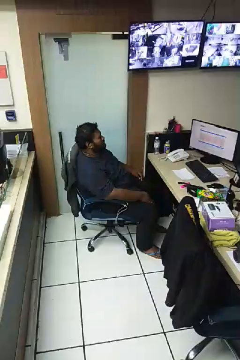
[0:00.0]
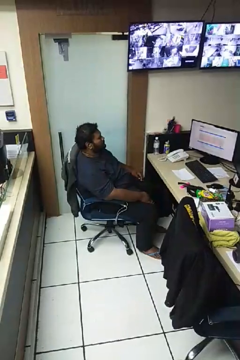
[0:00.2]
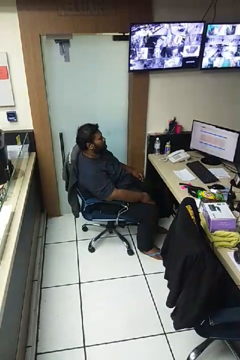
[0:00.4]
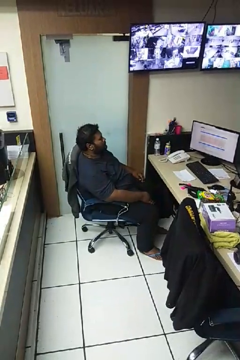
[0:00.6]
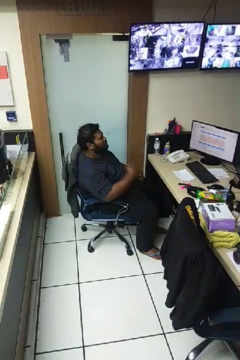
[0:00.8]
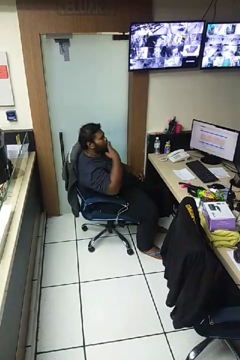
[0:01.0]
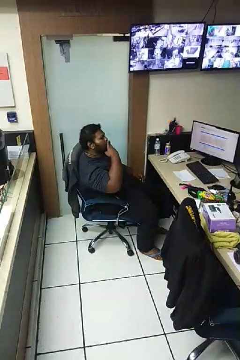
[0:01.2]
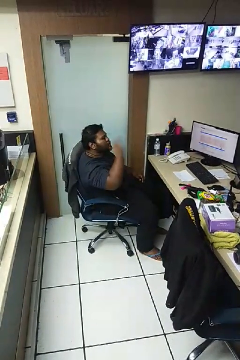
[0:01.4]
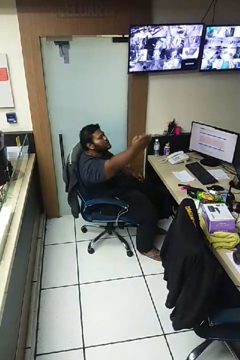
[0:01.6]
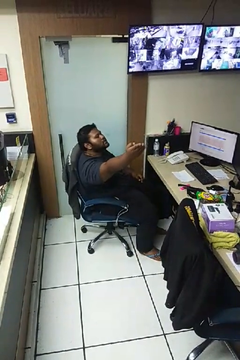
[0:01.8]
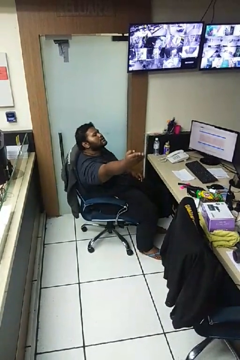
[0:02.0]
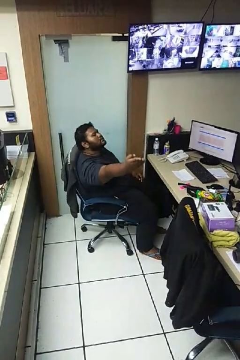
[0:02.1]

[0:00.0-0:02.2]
person gestures blow kiss

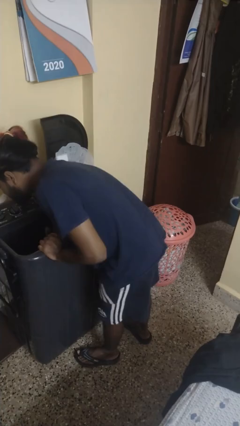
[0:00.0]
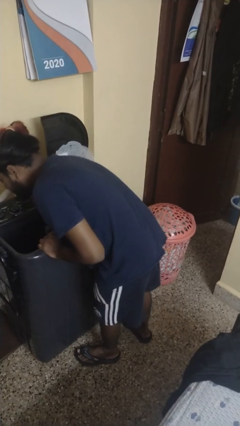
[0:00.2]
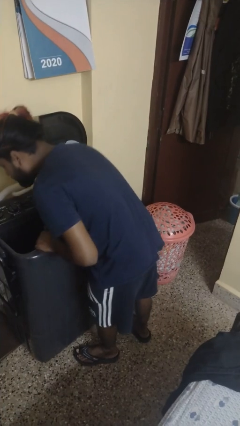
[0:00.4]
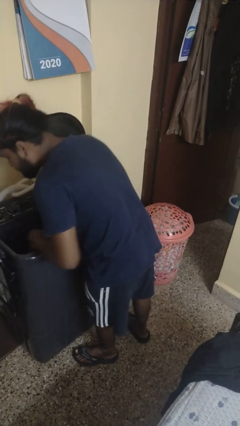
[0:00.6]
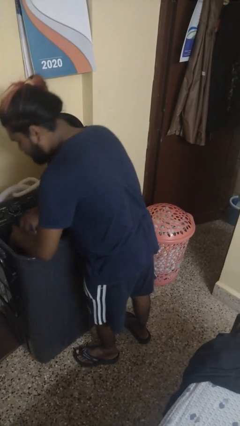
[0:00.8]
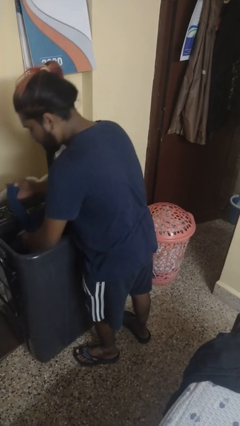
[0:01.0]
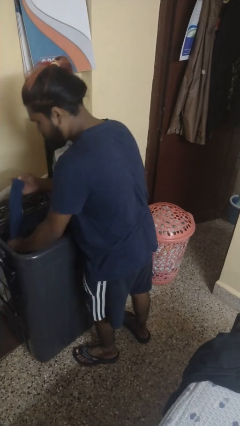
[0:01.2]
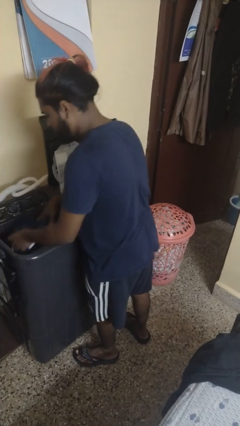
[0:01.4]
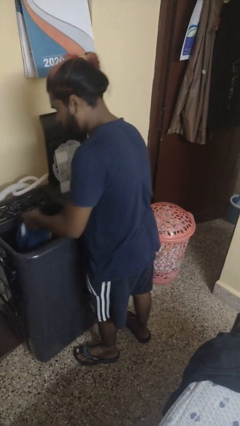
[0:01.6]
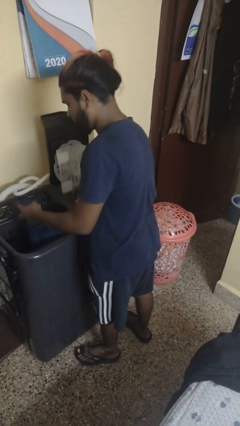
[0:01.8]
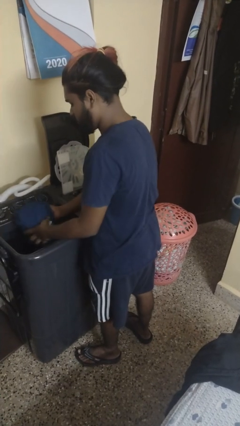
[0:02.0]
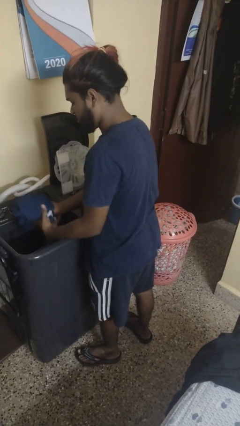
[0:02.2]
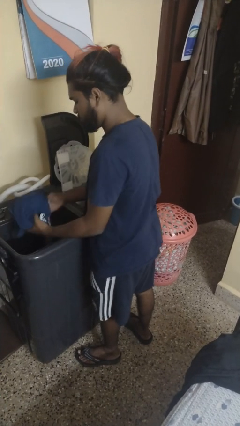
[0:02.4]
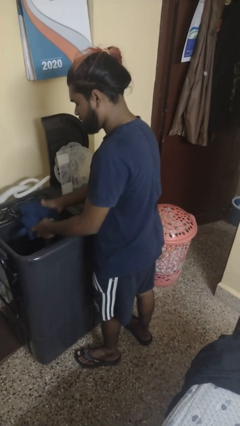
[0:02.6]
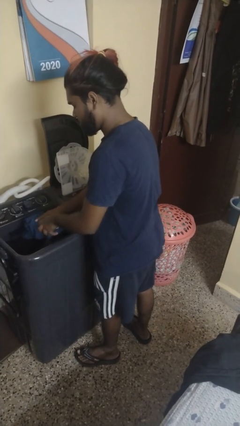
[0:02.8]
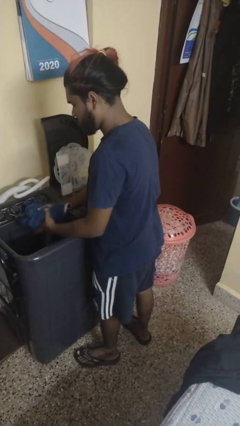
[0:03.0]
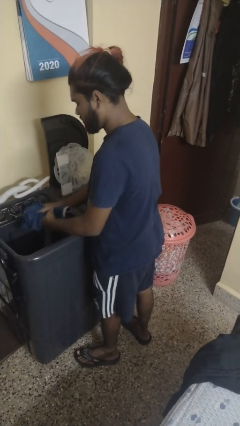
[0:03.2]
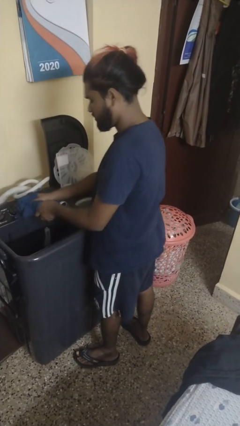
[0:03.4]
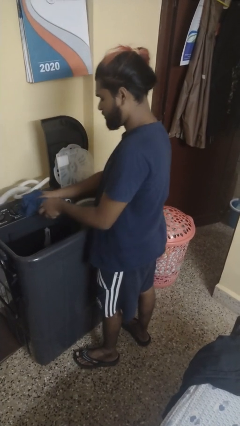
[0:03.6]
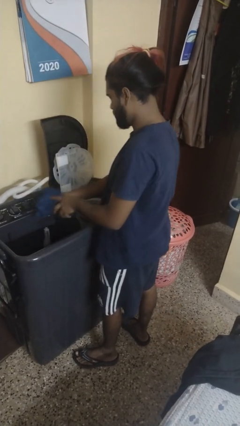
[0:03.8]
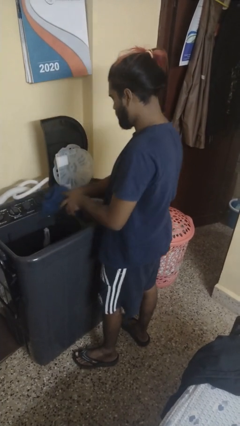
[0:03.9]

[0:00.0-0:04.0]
person unloads clotheswasher

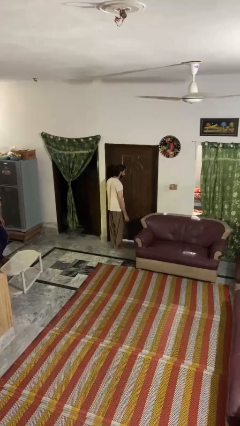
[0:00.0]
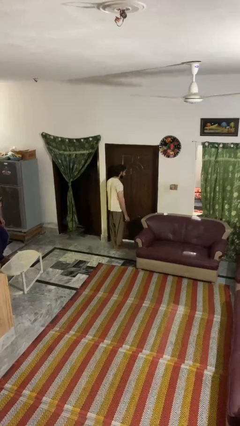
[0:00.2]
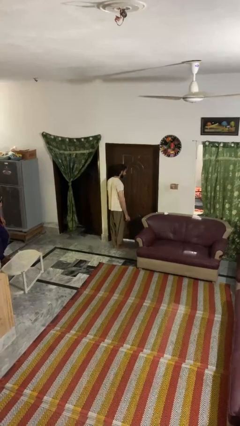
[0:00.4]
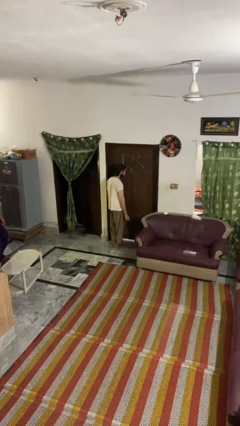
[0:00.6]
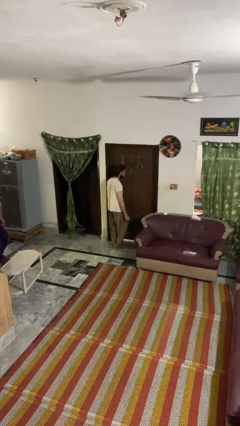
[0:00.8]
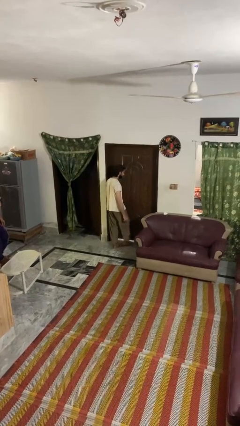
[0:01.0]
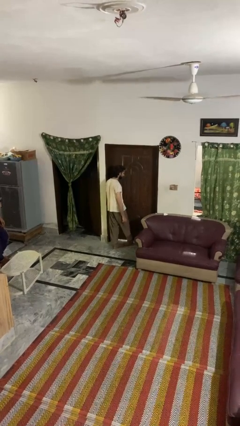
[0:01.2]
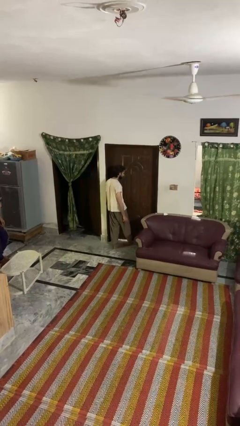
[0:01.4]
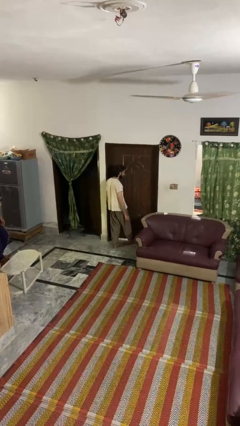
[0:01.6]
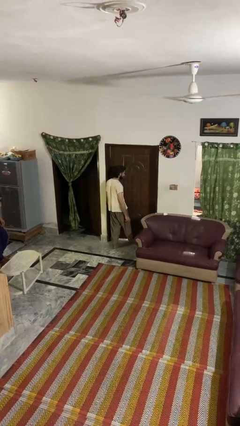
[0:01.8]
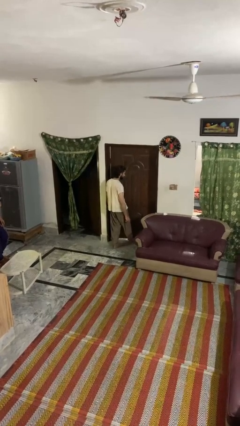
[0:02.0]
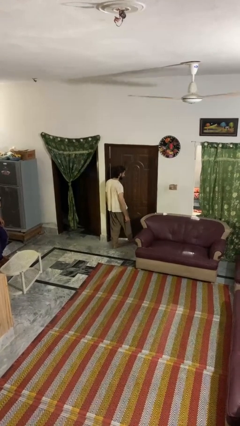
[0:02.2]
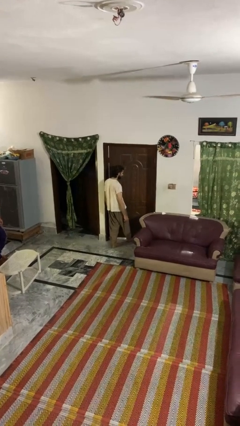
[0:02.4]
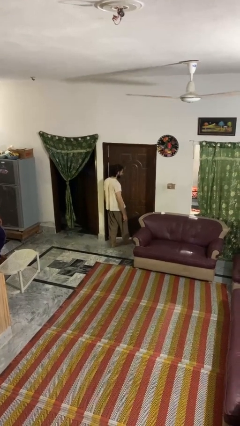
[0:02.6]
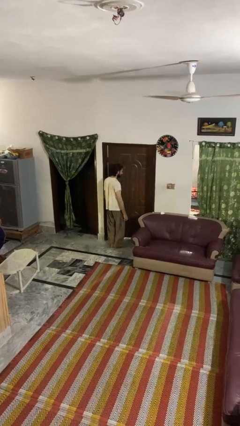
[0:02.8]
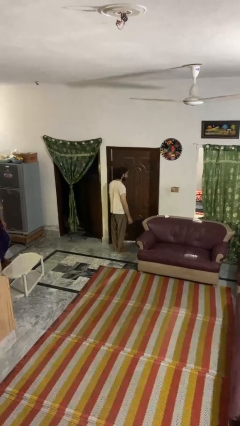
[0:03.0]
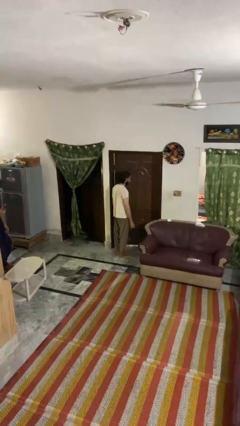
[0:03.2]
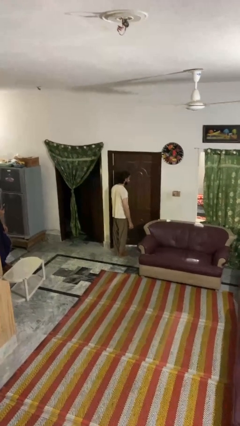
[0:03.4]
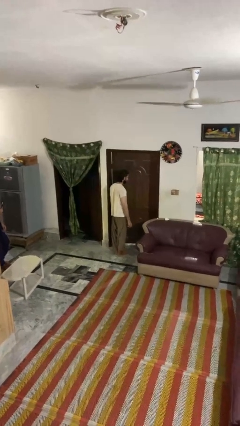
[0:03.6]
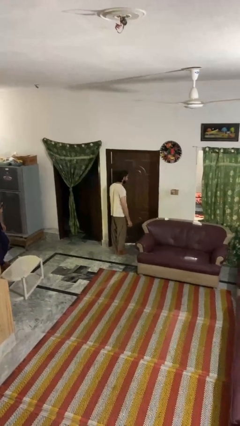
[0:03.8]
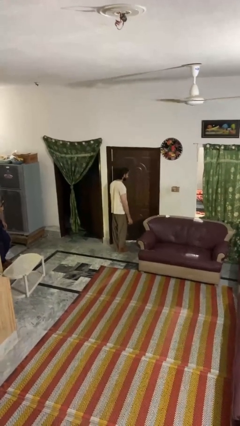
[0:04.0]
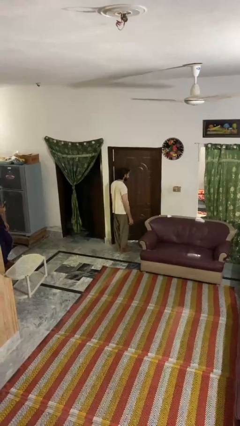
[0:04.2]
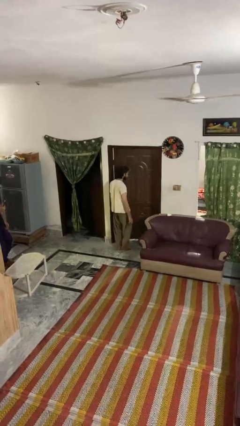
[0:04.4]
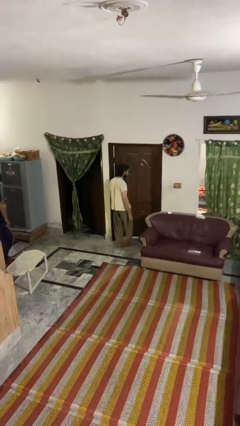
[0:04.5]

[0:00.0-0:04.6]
person opens facility door

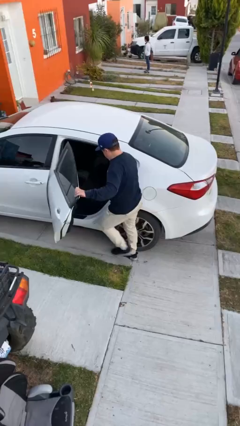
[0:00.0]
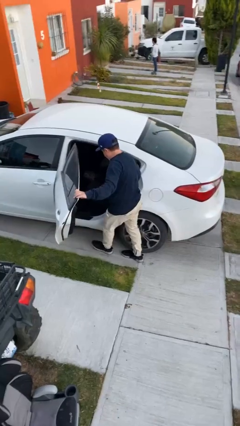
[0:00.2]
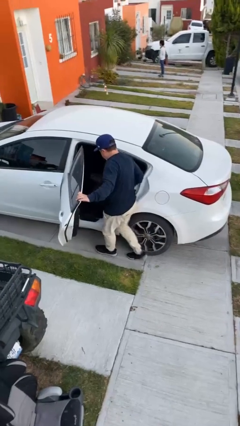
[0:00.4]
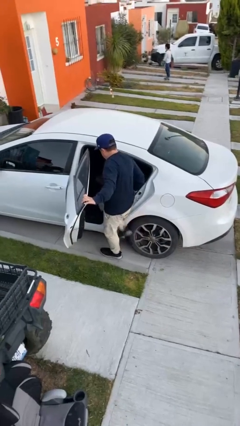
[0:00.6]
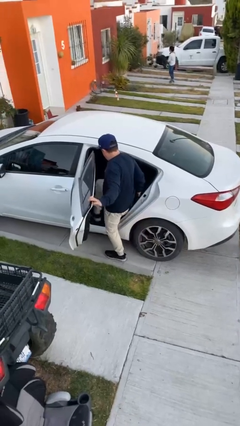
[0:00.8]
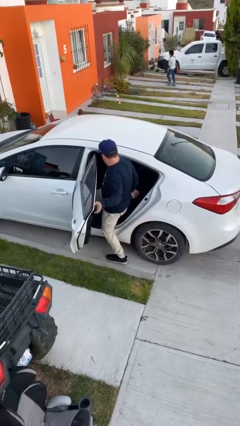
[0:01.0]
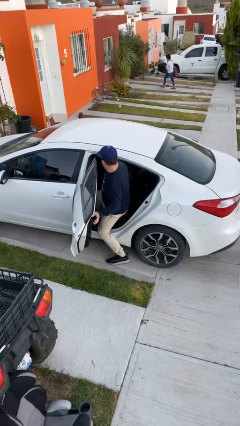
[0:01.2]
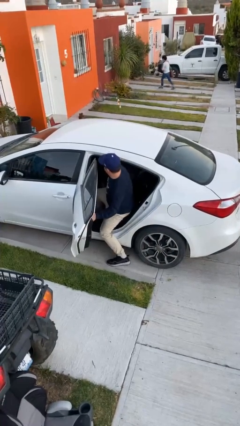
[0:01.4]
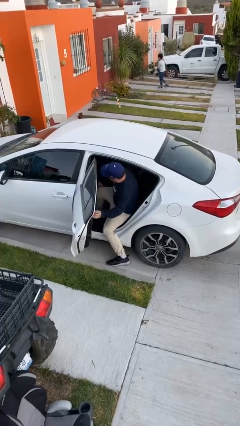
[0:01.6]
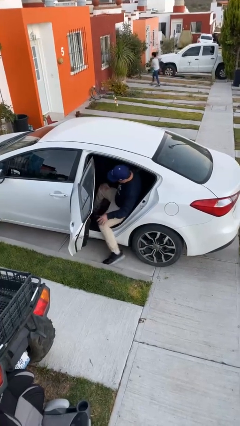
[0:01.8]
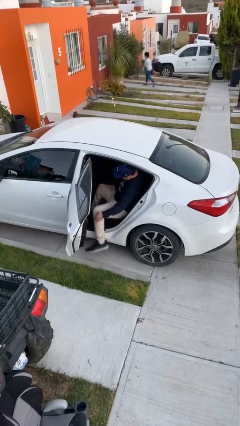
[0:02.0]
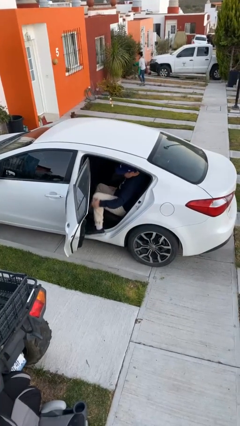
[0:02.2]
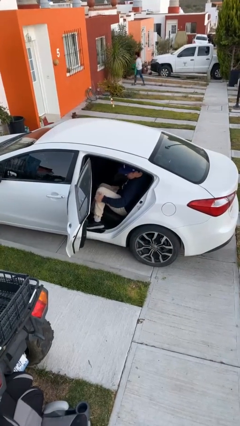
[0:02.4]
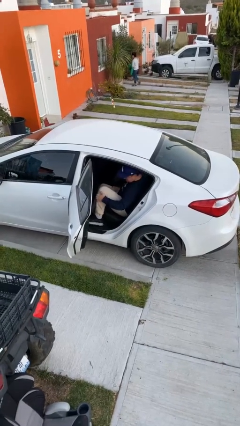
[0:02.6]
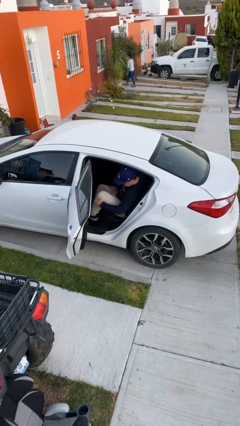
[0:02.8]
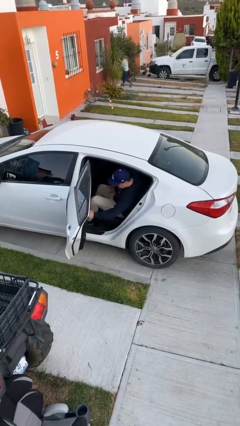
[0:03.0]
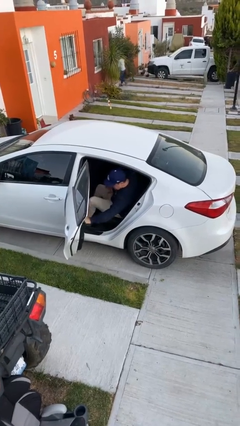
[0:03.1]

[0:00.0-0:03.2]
person enters car

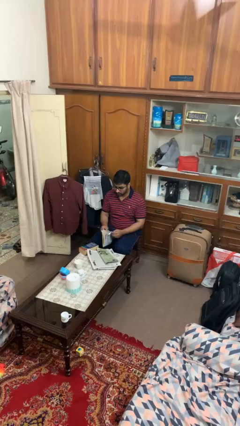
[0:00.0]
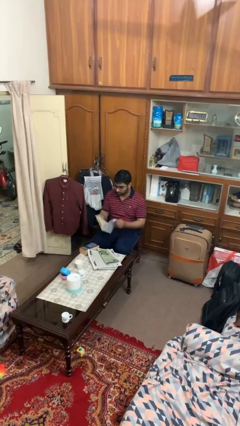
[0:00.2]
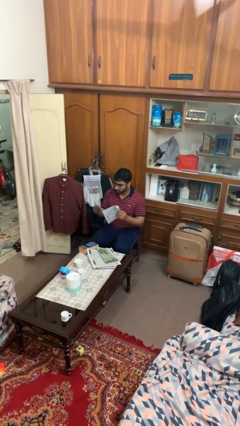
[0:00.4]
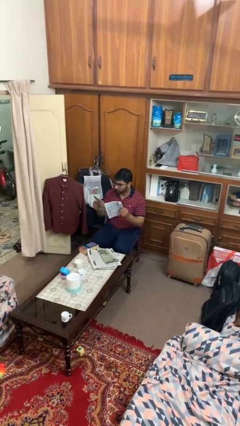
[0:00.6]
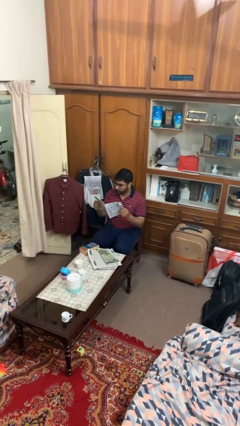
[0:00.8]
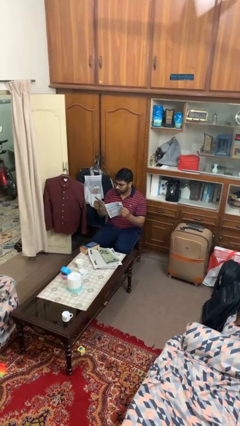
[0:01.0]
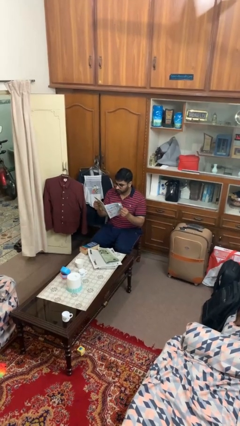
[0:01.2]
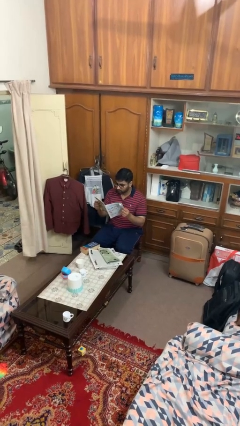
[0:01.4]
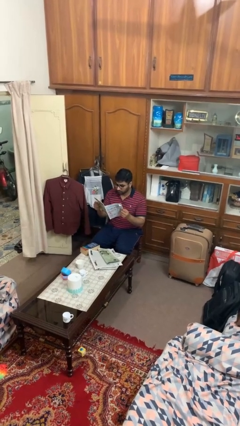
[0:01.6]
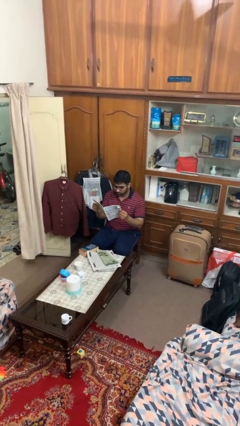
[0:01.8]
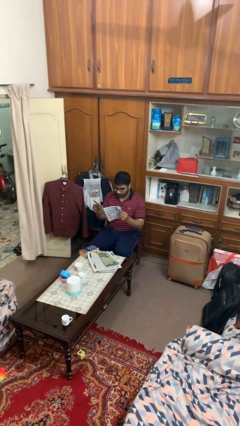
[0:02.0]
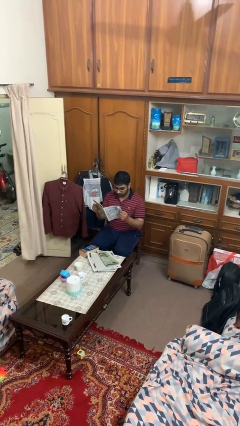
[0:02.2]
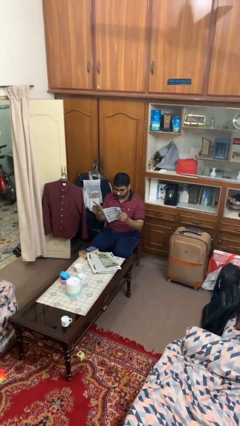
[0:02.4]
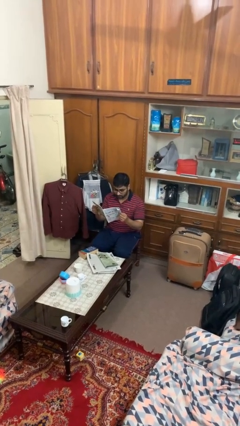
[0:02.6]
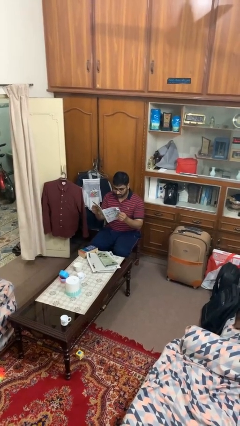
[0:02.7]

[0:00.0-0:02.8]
person reads magazine

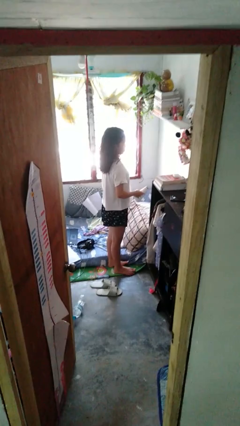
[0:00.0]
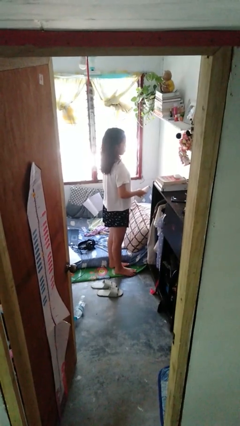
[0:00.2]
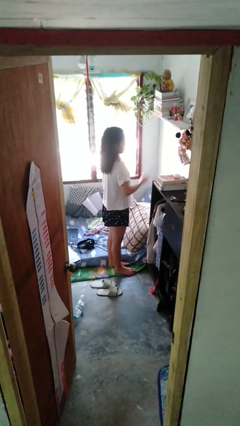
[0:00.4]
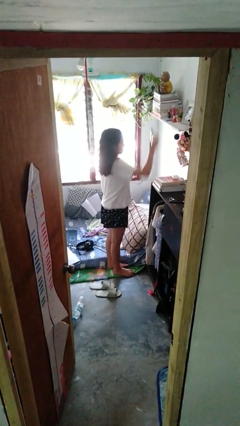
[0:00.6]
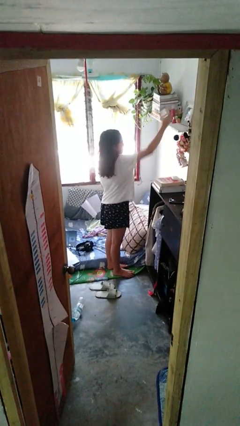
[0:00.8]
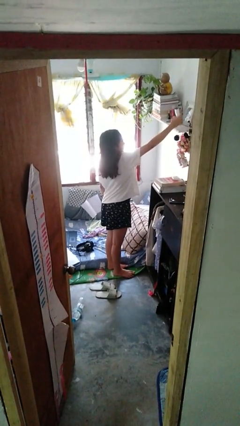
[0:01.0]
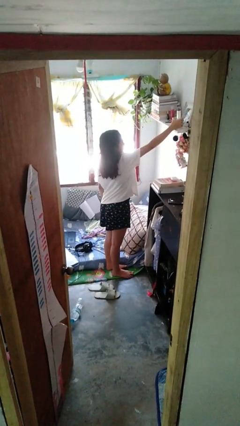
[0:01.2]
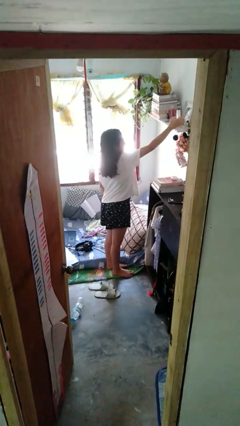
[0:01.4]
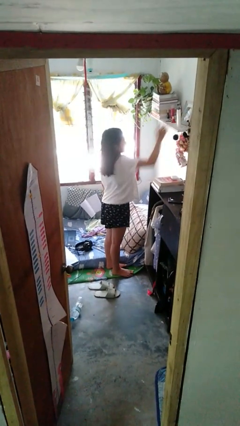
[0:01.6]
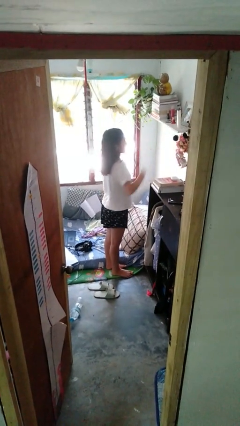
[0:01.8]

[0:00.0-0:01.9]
person puts down object on shelf
